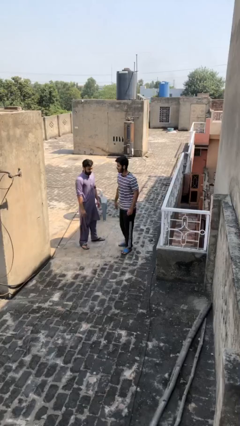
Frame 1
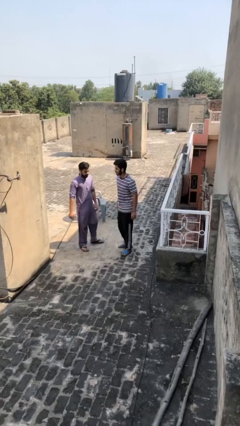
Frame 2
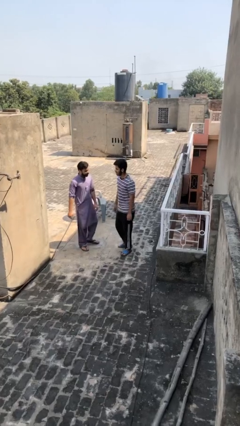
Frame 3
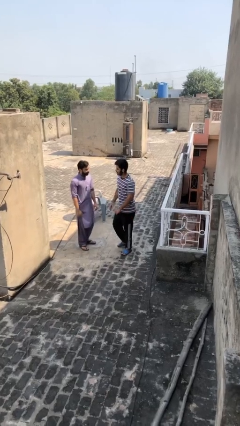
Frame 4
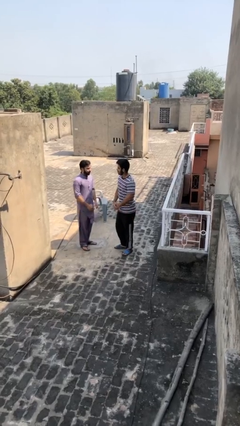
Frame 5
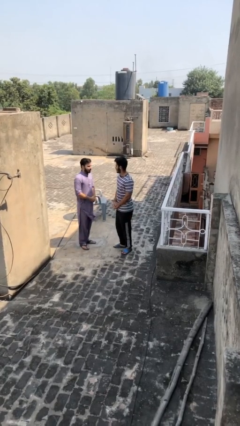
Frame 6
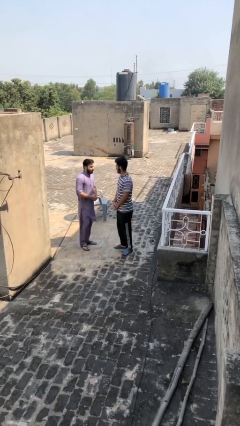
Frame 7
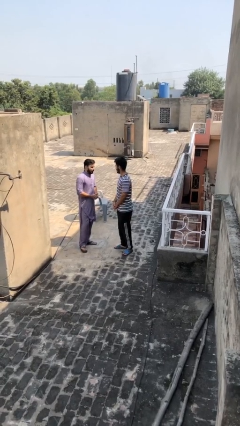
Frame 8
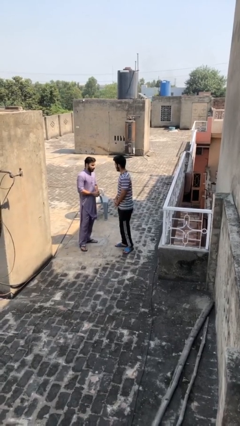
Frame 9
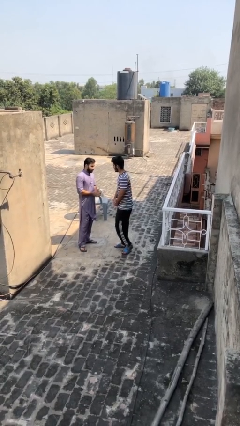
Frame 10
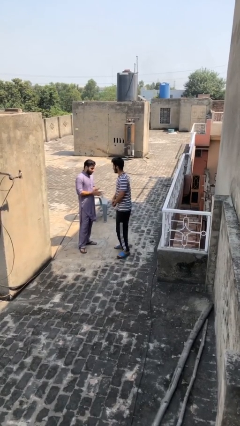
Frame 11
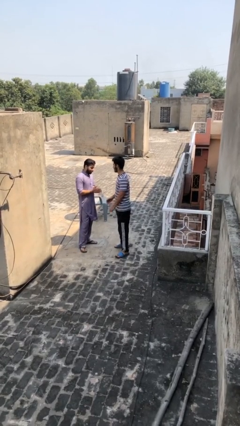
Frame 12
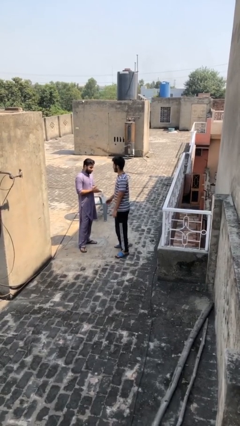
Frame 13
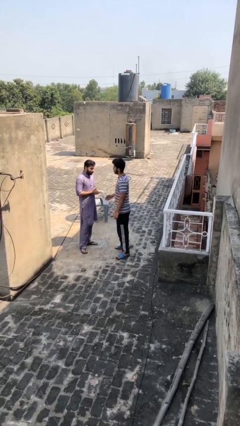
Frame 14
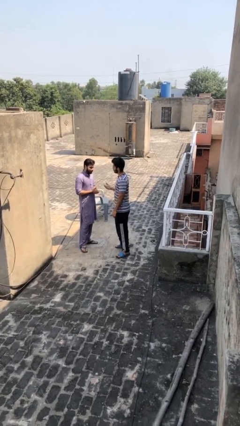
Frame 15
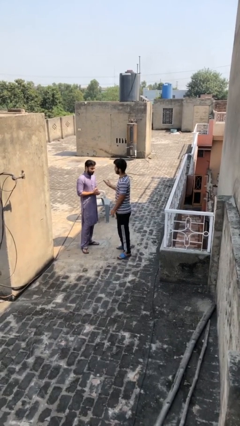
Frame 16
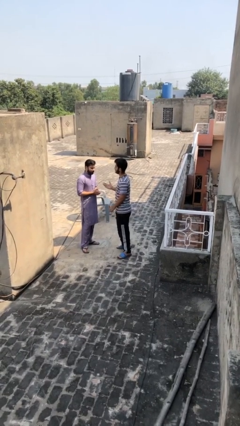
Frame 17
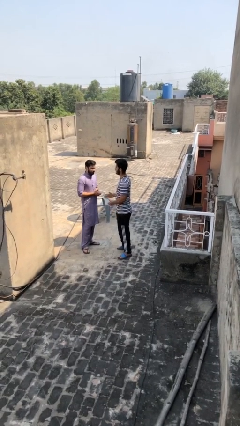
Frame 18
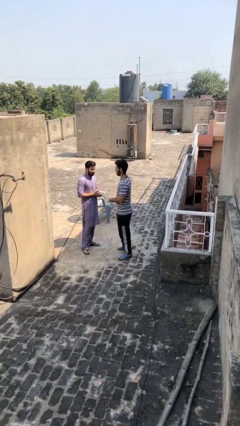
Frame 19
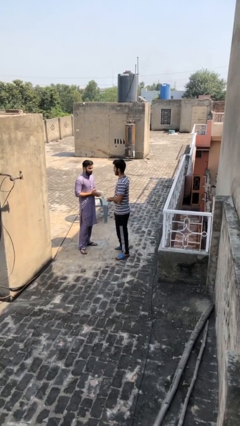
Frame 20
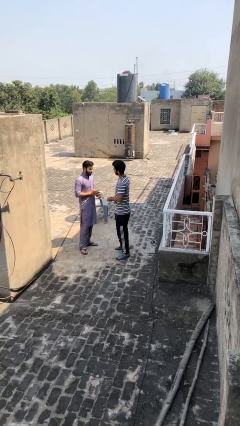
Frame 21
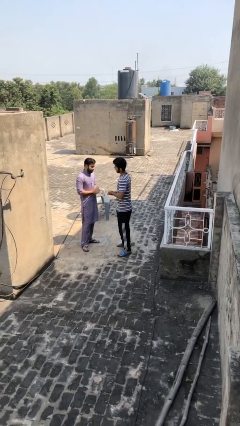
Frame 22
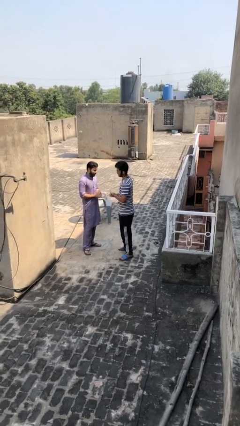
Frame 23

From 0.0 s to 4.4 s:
person talks to person

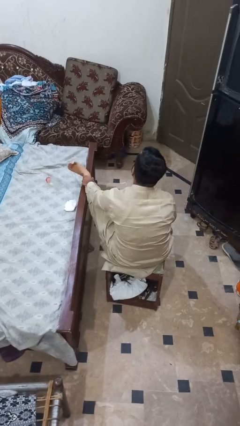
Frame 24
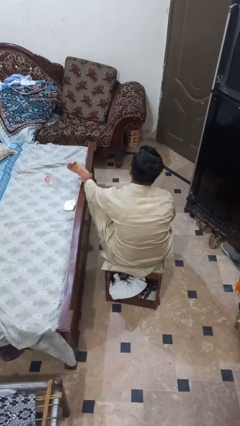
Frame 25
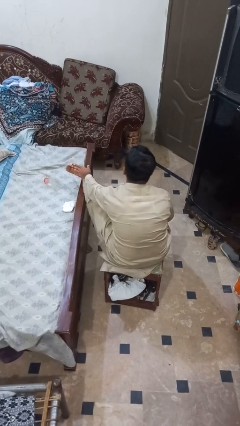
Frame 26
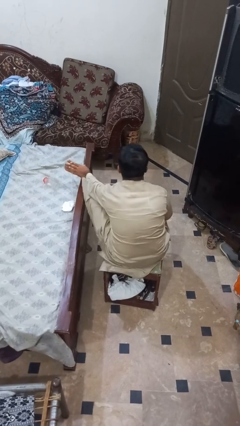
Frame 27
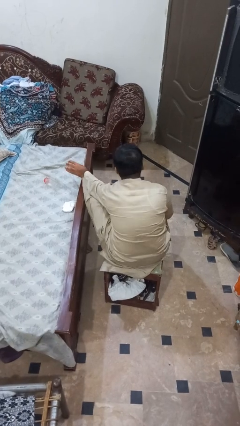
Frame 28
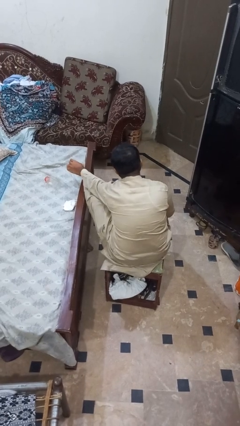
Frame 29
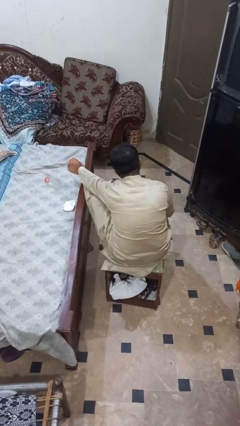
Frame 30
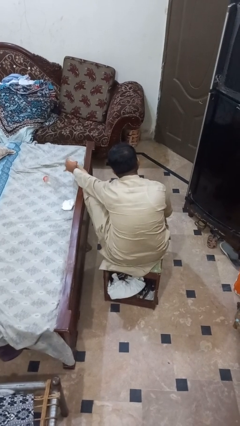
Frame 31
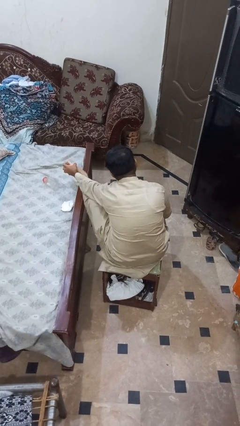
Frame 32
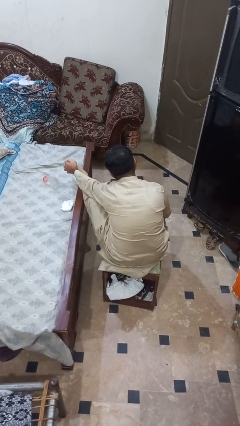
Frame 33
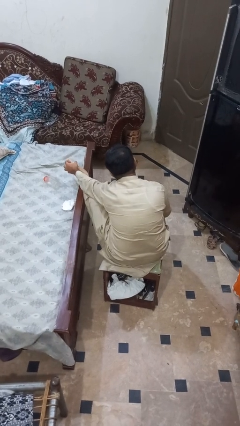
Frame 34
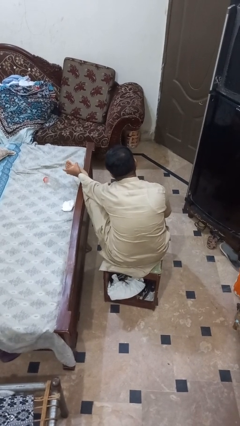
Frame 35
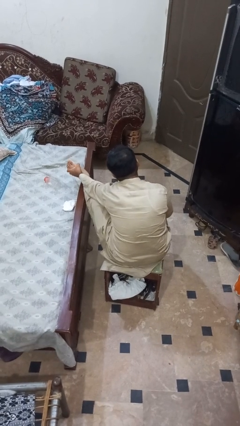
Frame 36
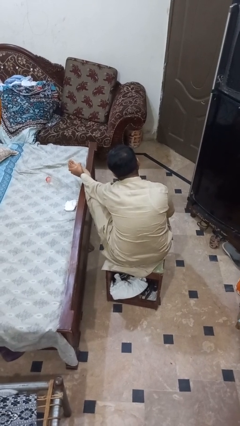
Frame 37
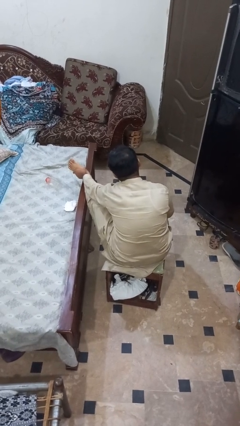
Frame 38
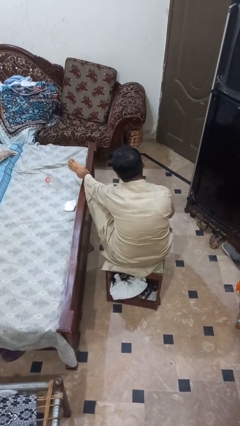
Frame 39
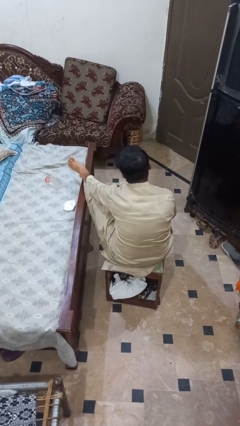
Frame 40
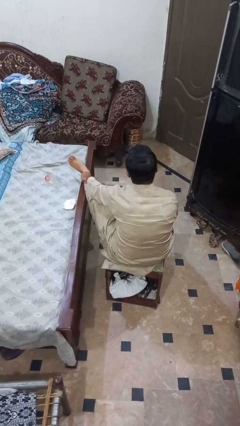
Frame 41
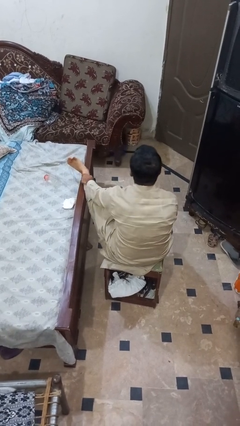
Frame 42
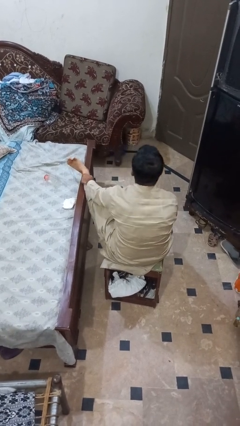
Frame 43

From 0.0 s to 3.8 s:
person rubs foot

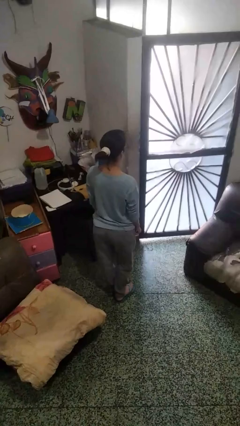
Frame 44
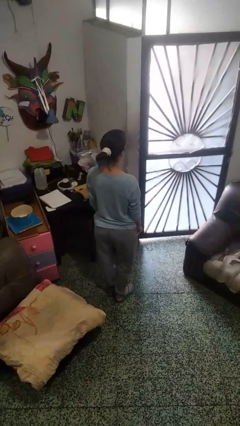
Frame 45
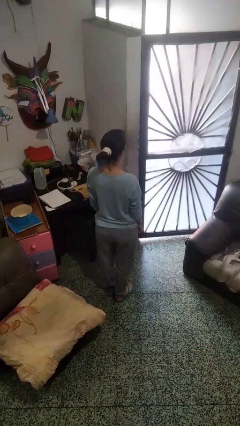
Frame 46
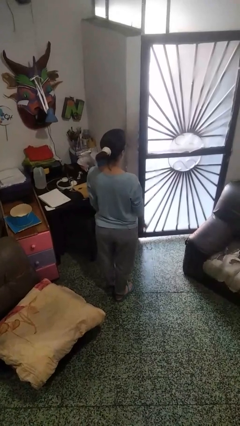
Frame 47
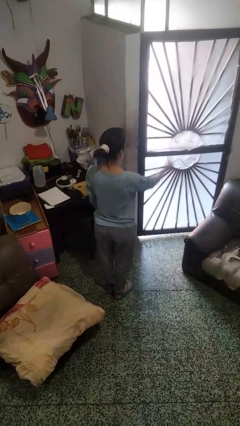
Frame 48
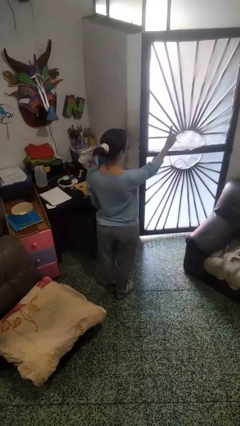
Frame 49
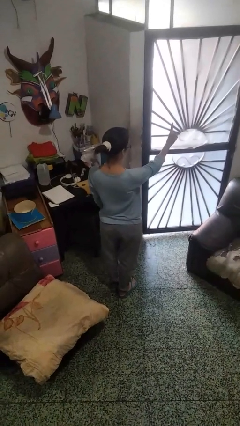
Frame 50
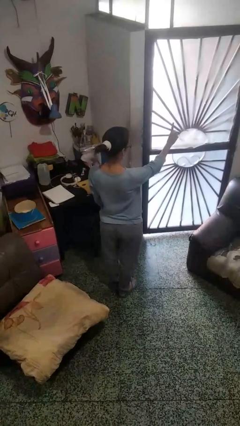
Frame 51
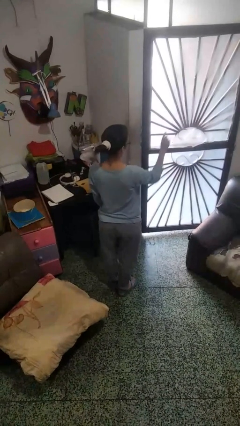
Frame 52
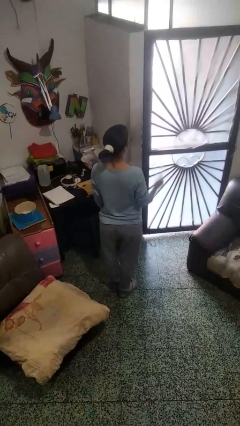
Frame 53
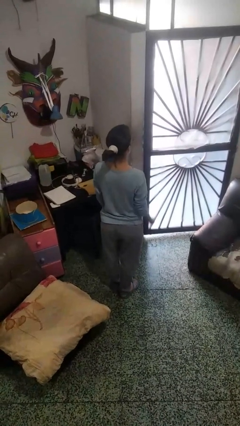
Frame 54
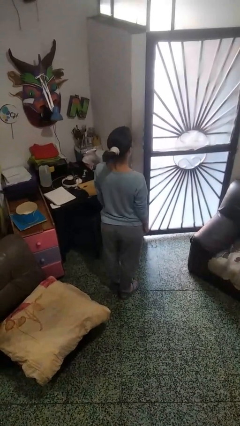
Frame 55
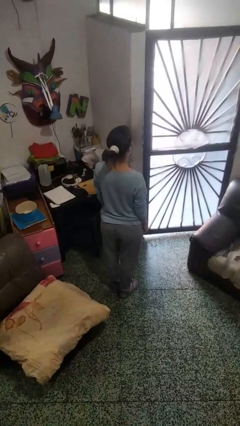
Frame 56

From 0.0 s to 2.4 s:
person gestures number one

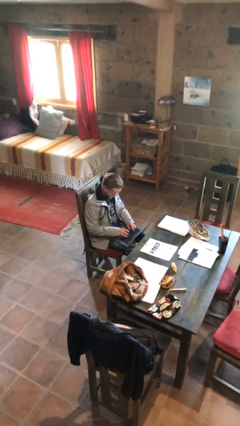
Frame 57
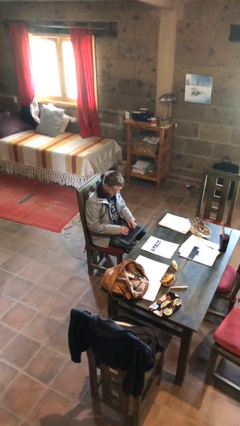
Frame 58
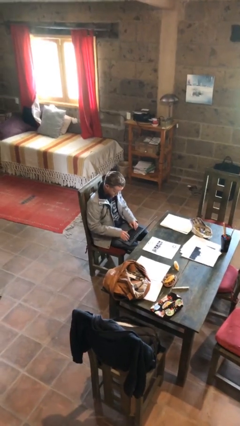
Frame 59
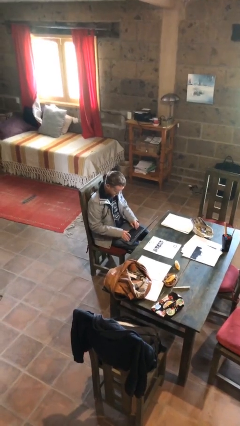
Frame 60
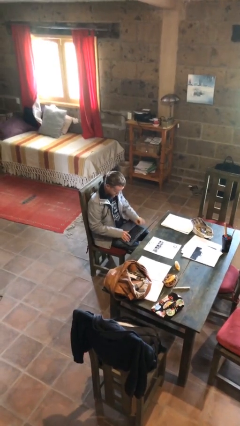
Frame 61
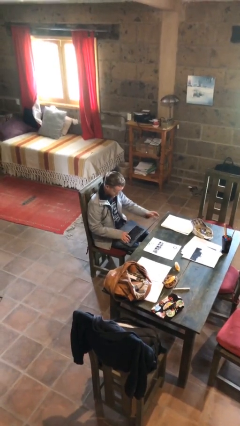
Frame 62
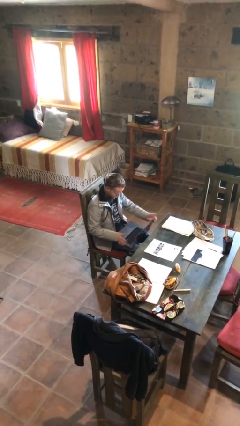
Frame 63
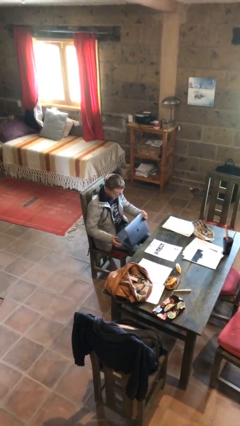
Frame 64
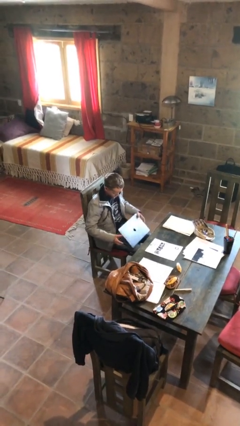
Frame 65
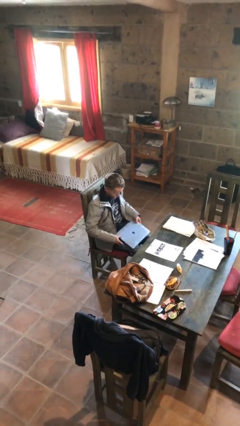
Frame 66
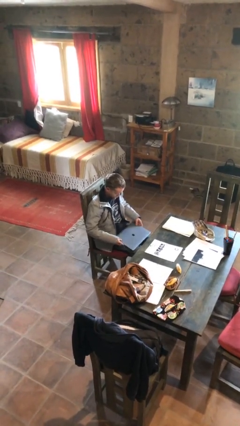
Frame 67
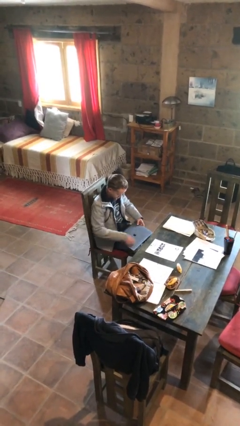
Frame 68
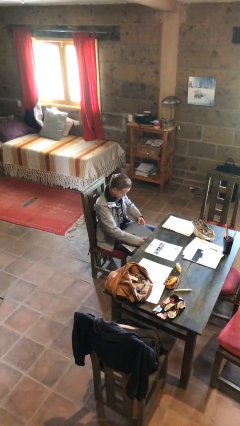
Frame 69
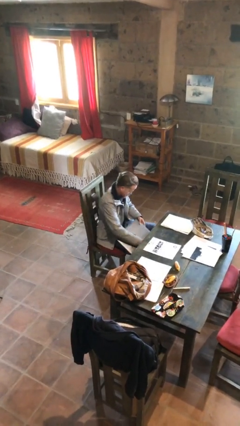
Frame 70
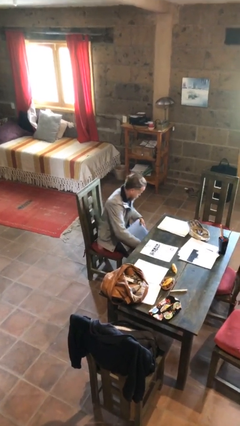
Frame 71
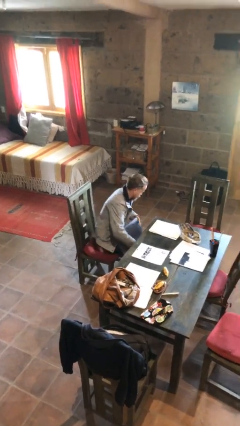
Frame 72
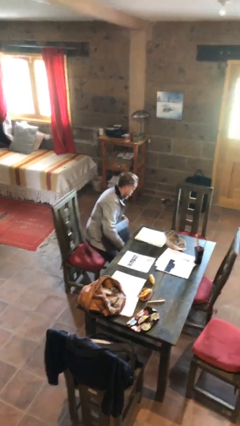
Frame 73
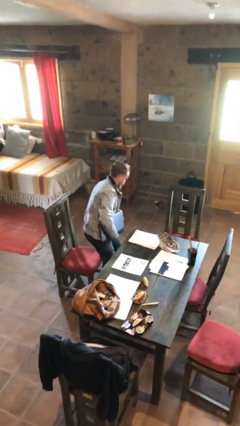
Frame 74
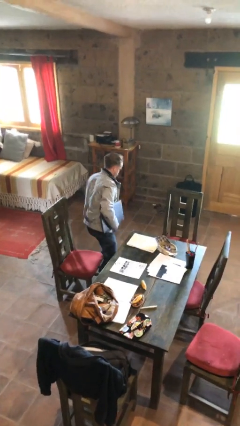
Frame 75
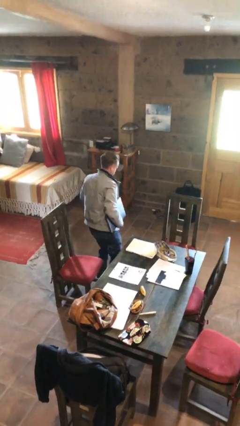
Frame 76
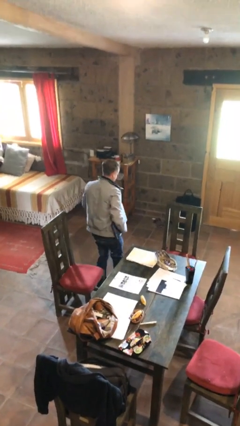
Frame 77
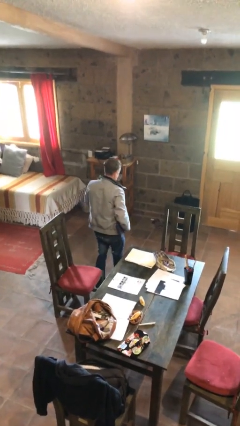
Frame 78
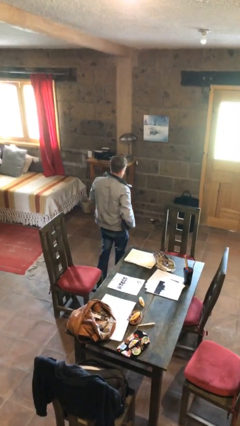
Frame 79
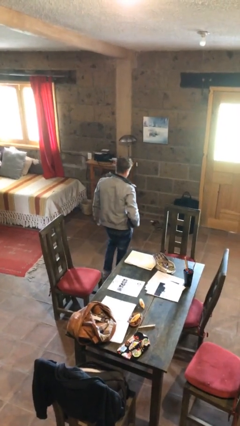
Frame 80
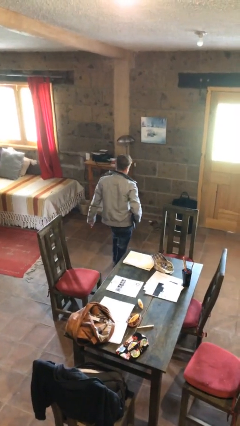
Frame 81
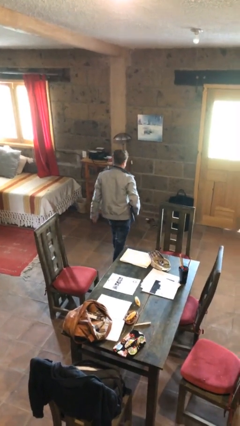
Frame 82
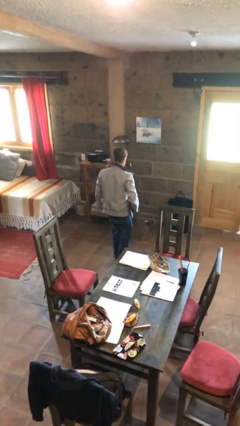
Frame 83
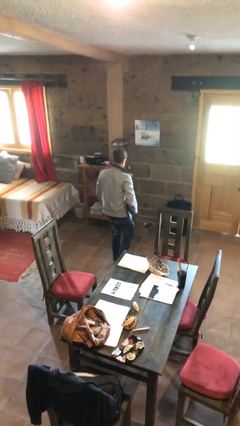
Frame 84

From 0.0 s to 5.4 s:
person stands up

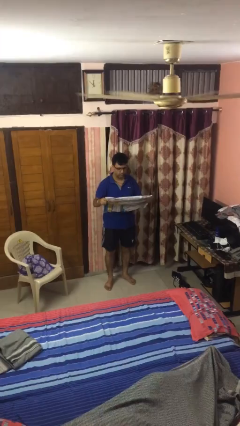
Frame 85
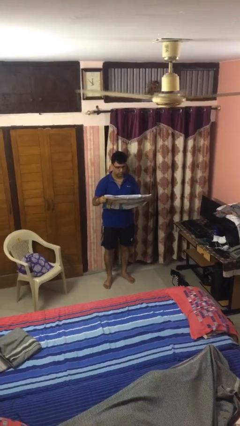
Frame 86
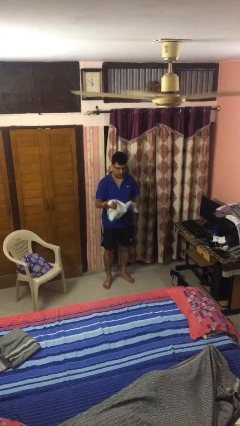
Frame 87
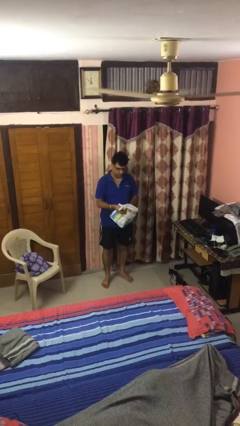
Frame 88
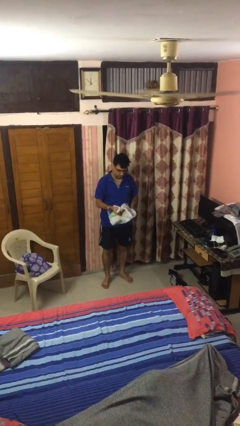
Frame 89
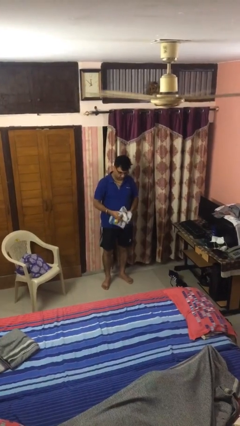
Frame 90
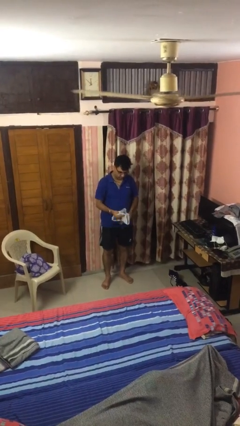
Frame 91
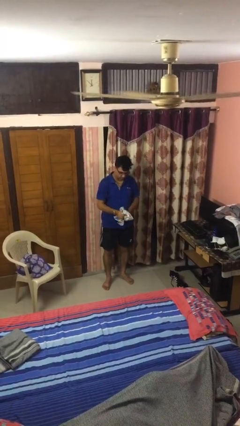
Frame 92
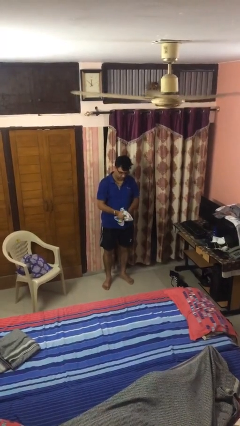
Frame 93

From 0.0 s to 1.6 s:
person crumples paper

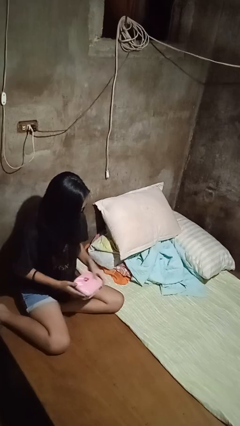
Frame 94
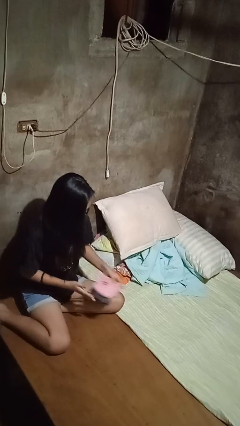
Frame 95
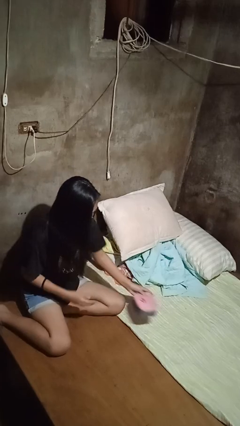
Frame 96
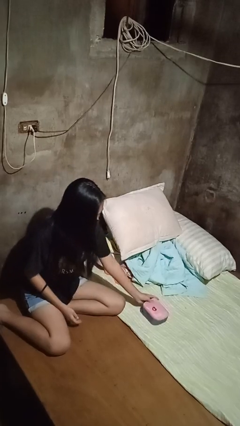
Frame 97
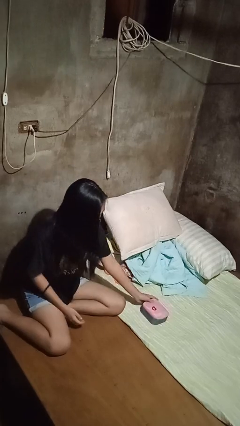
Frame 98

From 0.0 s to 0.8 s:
person puts down object on bed
